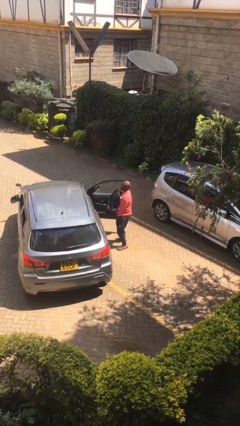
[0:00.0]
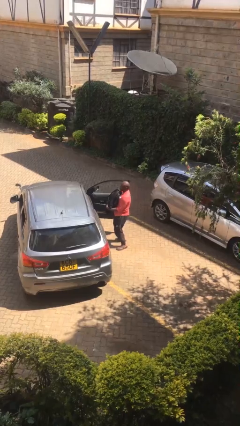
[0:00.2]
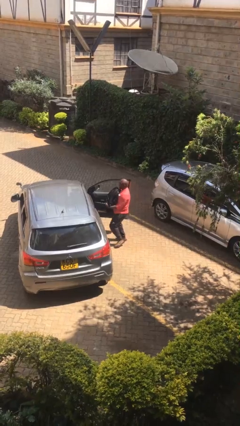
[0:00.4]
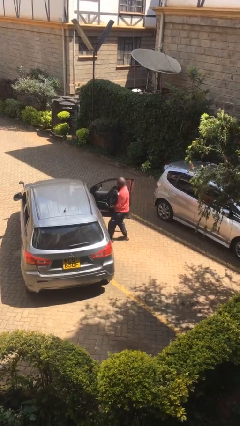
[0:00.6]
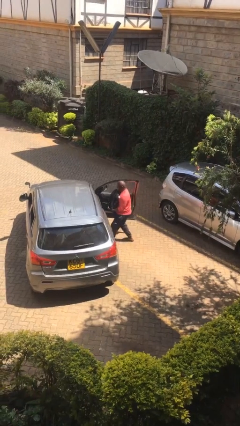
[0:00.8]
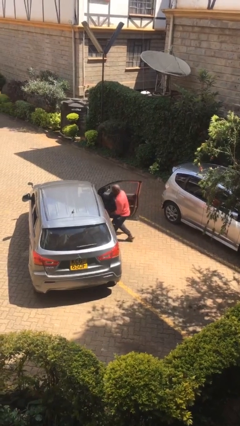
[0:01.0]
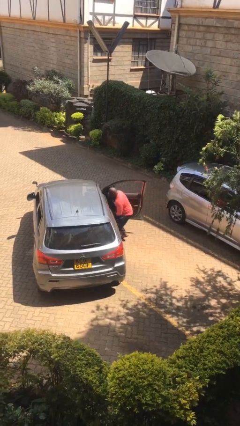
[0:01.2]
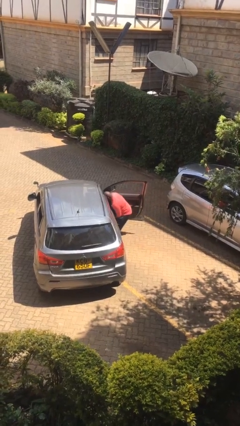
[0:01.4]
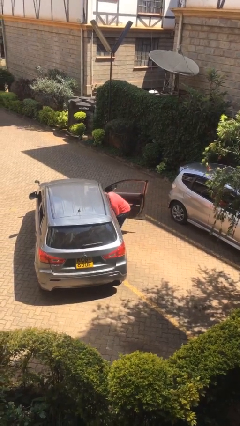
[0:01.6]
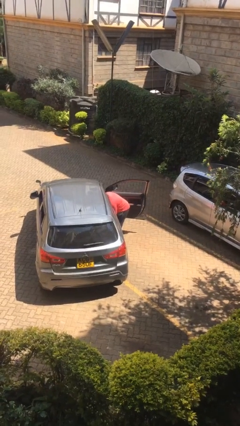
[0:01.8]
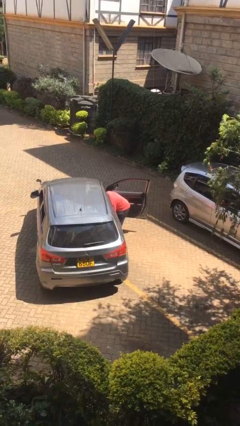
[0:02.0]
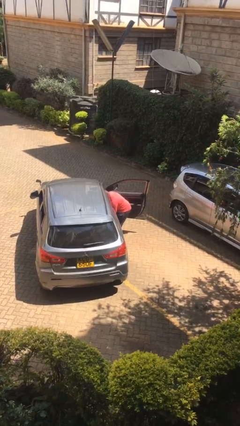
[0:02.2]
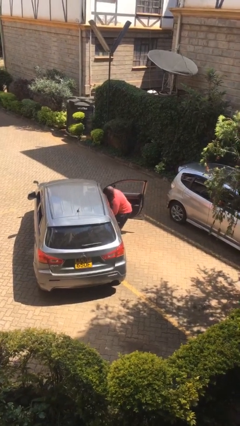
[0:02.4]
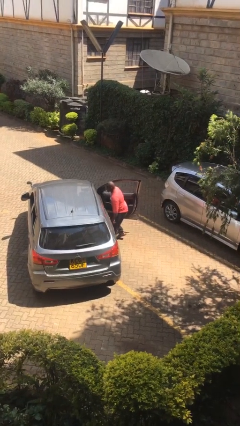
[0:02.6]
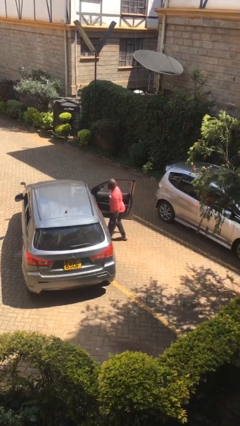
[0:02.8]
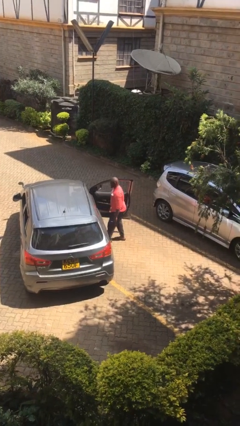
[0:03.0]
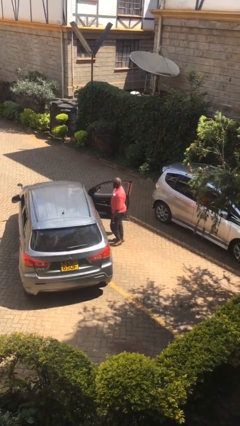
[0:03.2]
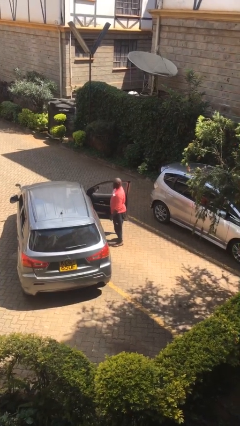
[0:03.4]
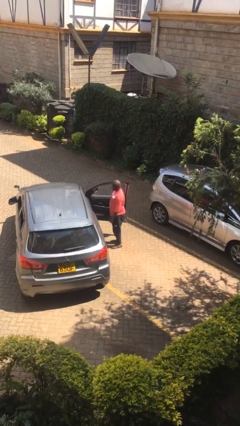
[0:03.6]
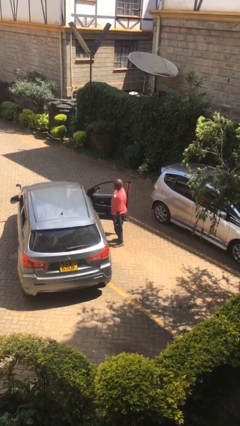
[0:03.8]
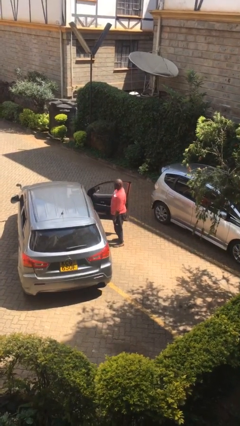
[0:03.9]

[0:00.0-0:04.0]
person loads car

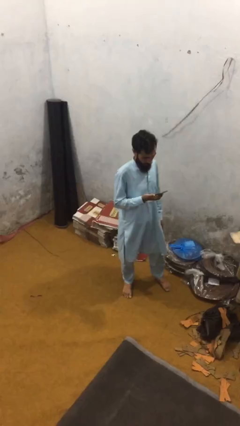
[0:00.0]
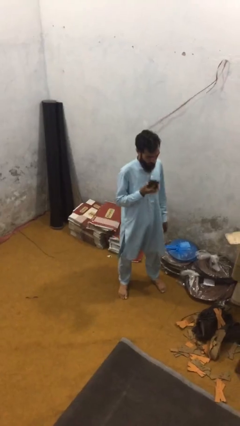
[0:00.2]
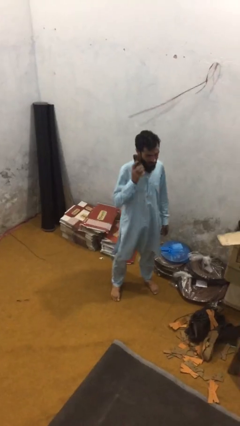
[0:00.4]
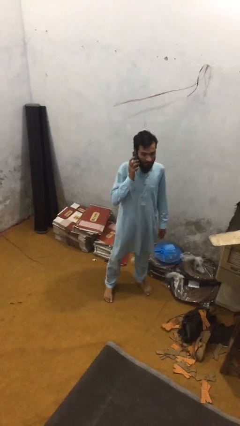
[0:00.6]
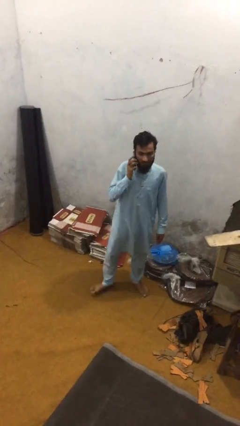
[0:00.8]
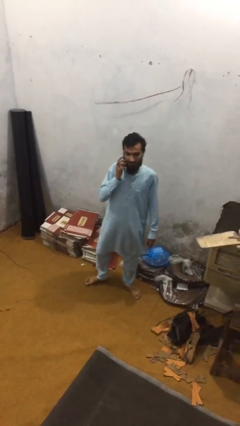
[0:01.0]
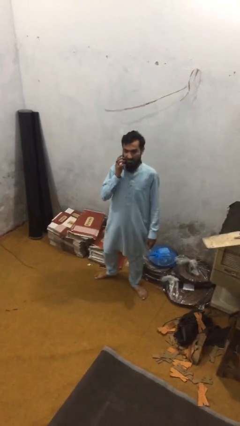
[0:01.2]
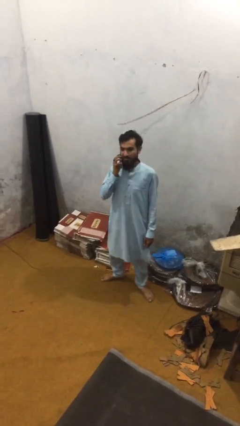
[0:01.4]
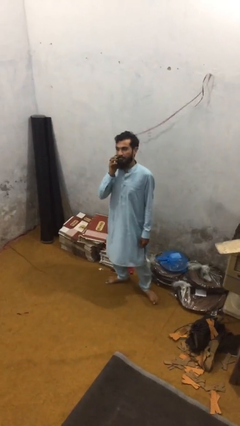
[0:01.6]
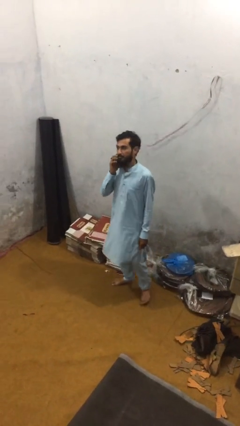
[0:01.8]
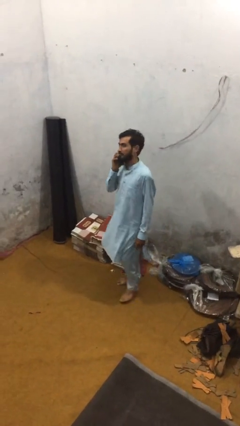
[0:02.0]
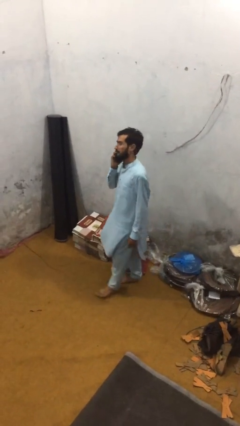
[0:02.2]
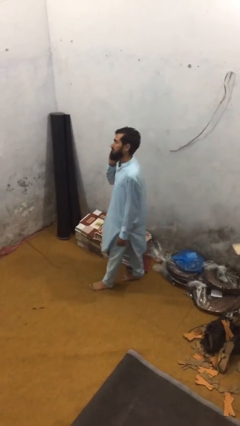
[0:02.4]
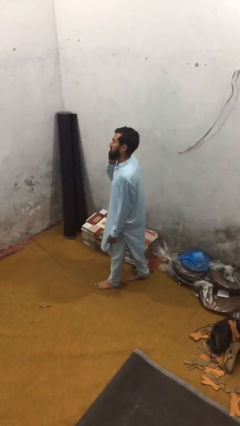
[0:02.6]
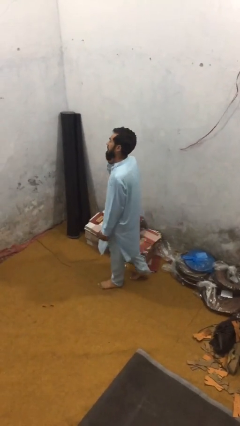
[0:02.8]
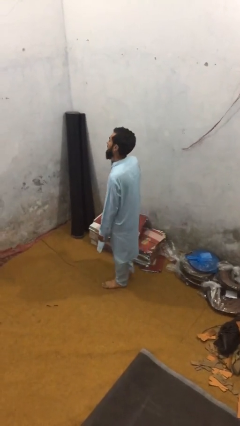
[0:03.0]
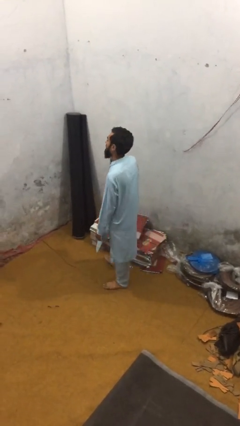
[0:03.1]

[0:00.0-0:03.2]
person talks on phone

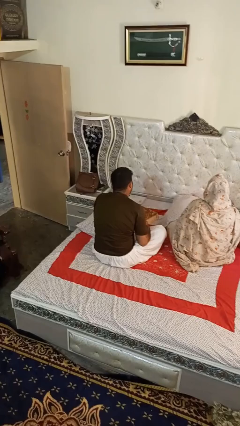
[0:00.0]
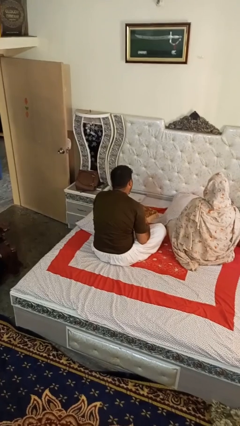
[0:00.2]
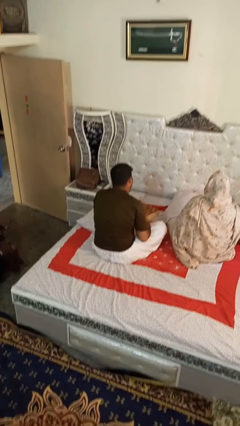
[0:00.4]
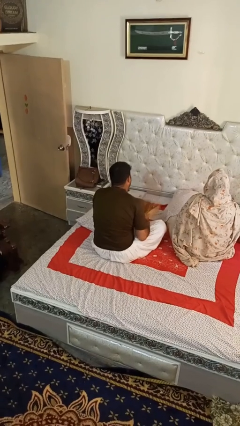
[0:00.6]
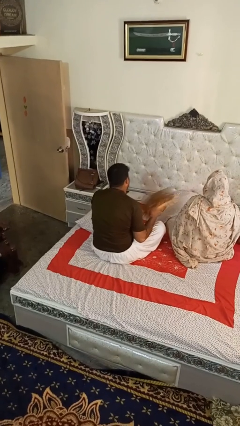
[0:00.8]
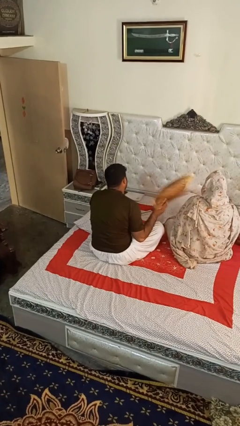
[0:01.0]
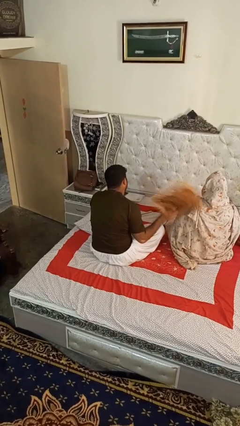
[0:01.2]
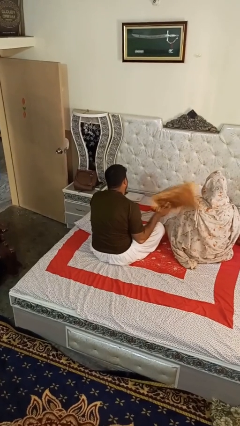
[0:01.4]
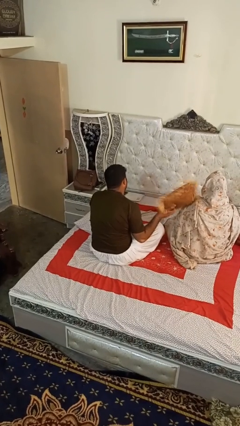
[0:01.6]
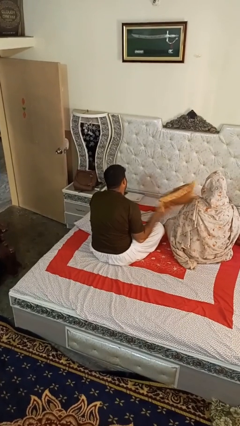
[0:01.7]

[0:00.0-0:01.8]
person hits person with pillow

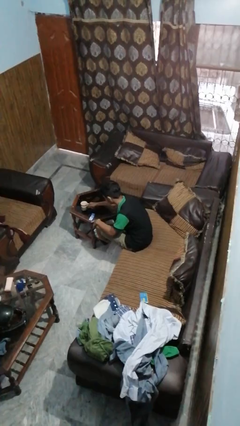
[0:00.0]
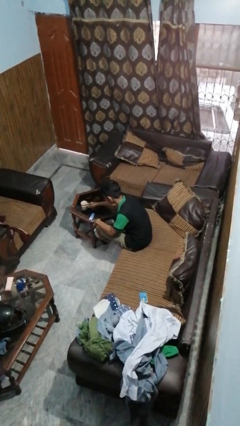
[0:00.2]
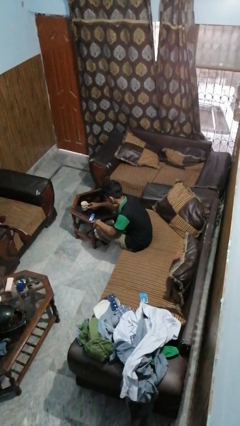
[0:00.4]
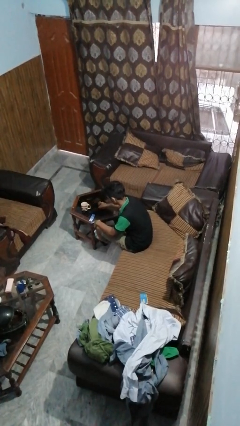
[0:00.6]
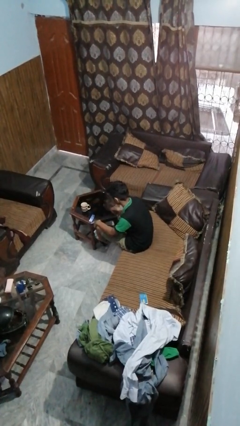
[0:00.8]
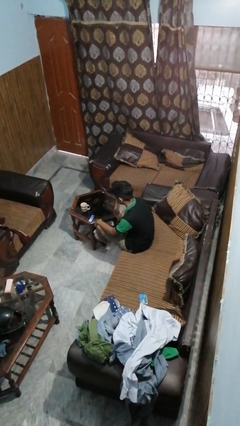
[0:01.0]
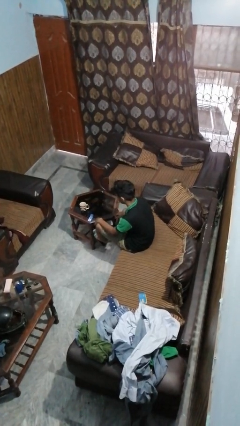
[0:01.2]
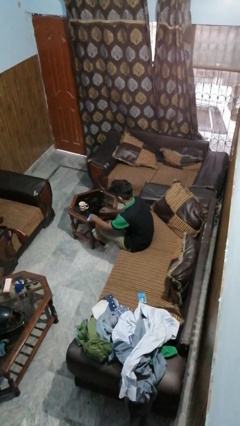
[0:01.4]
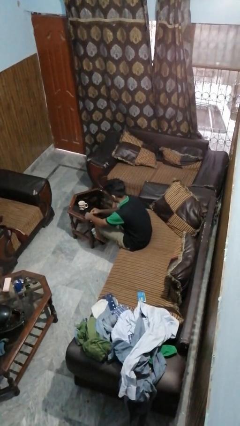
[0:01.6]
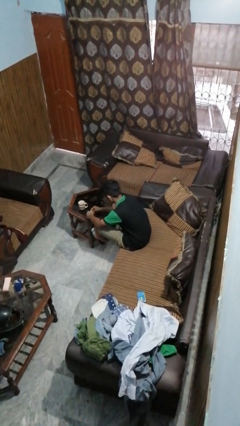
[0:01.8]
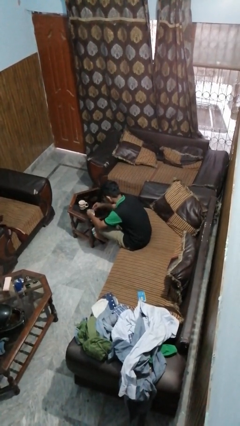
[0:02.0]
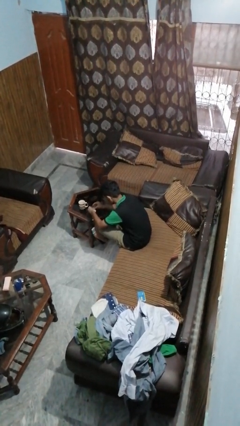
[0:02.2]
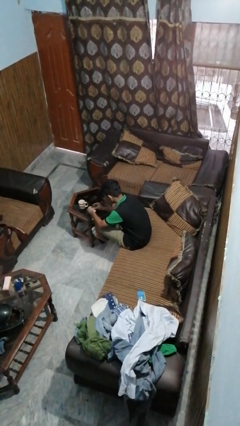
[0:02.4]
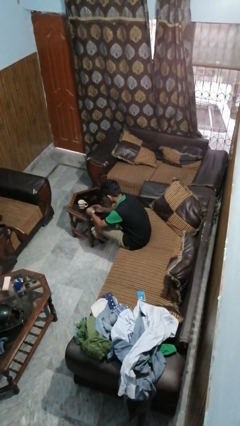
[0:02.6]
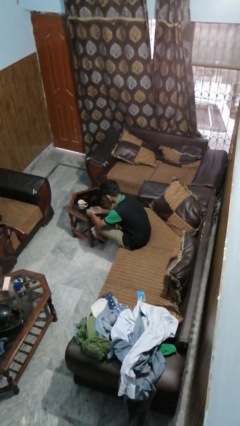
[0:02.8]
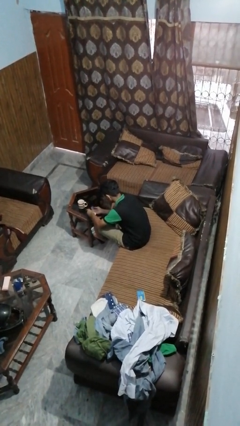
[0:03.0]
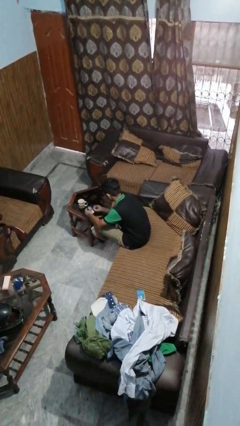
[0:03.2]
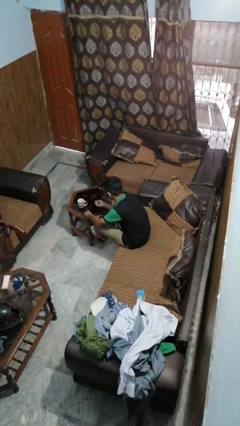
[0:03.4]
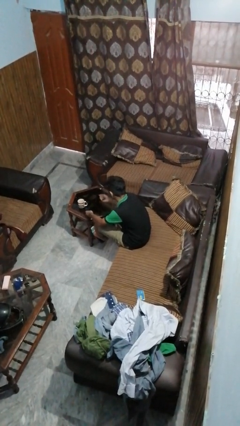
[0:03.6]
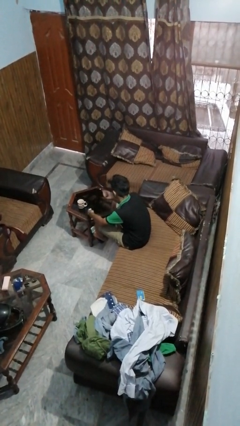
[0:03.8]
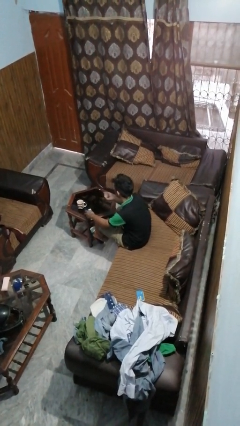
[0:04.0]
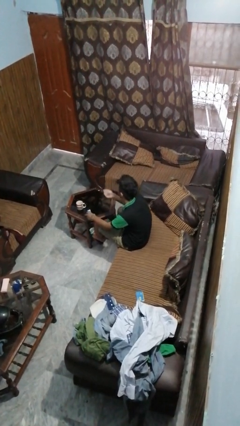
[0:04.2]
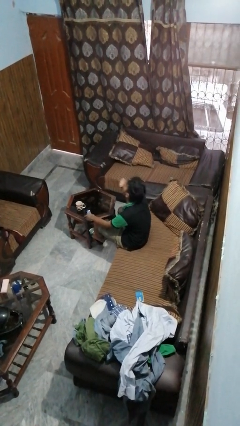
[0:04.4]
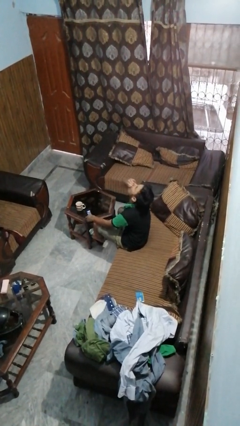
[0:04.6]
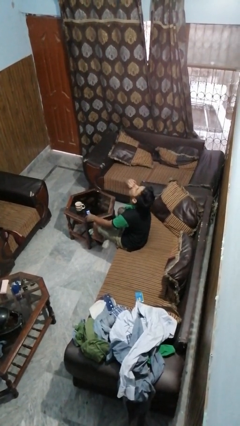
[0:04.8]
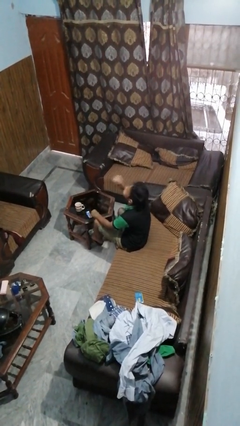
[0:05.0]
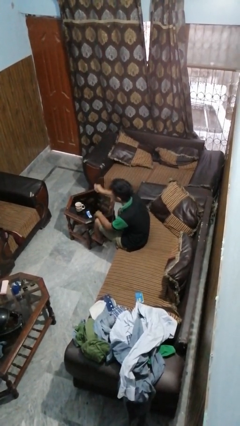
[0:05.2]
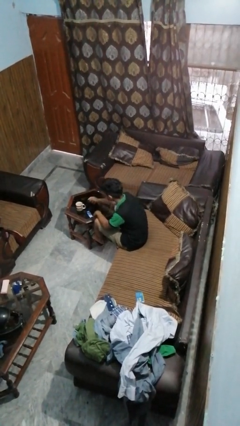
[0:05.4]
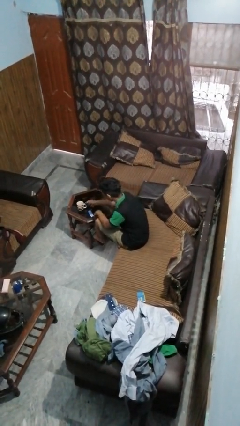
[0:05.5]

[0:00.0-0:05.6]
person takes medicine pills

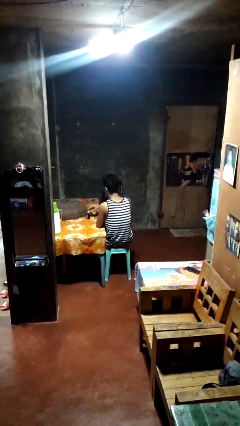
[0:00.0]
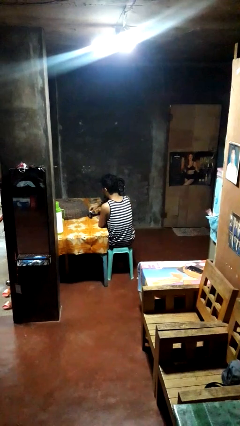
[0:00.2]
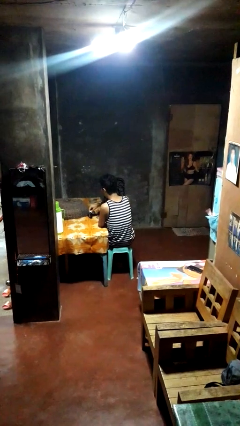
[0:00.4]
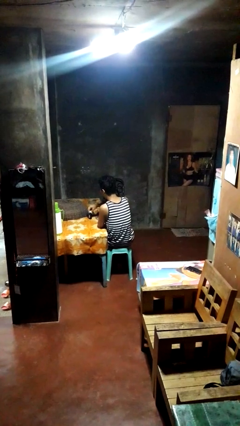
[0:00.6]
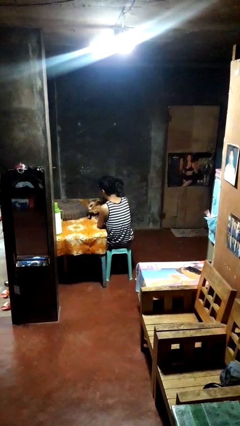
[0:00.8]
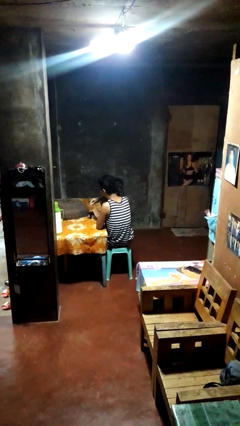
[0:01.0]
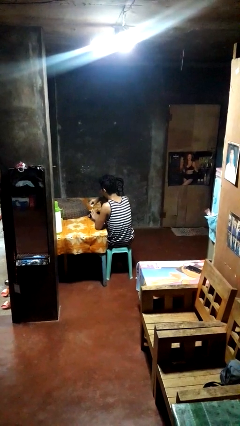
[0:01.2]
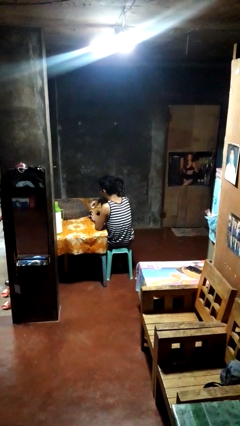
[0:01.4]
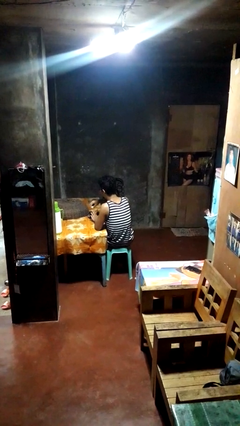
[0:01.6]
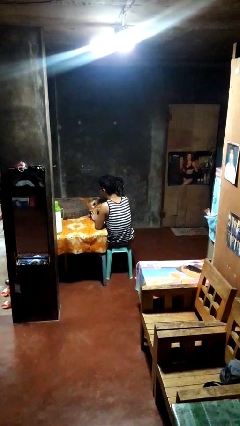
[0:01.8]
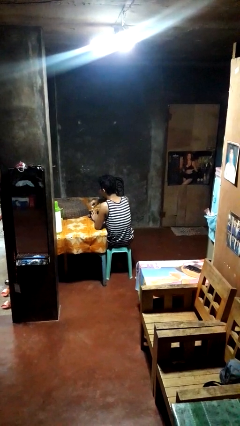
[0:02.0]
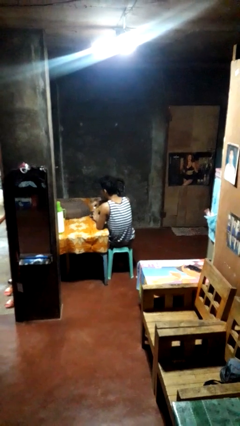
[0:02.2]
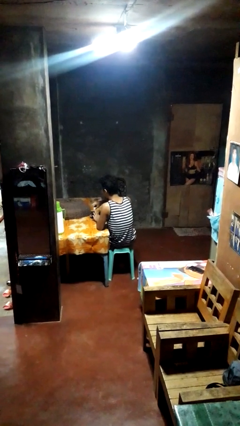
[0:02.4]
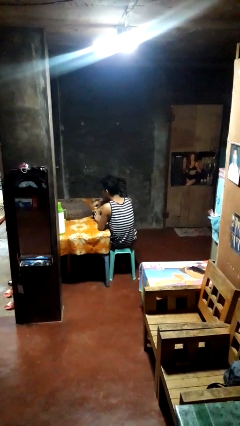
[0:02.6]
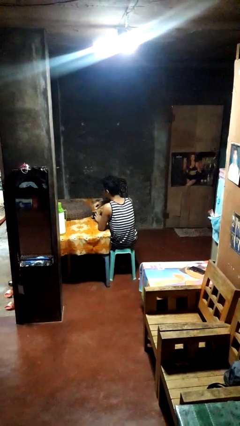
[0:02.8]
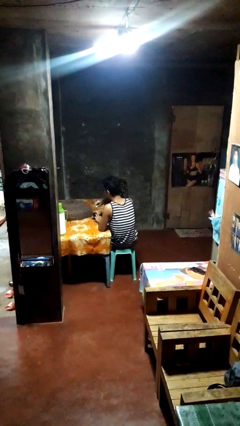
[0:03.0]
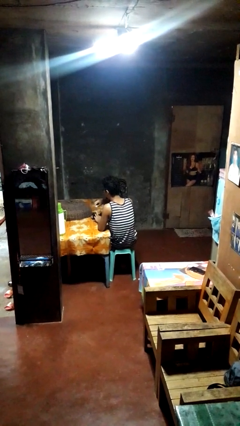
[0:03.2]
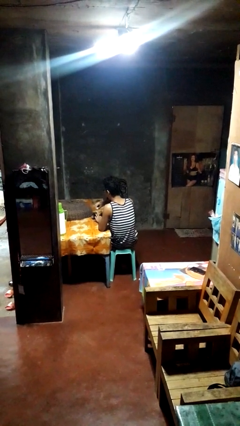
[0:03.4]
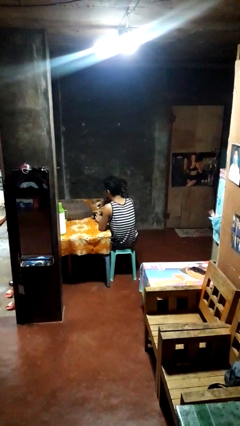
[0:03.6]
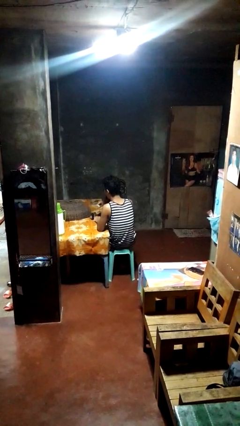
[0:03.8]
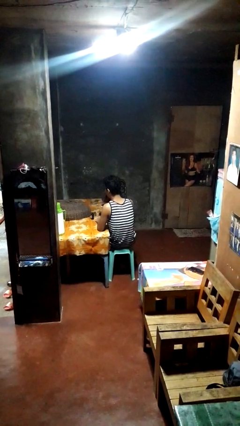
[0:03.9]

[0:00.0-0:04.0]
person paints fingernails
